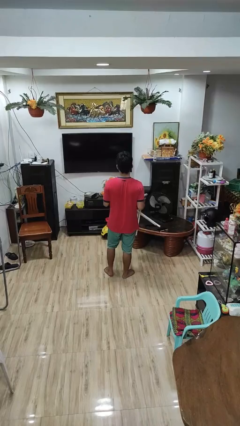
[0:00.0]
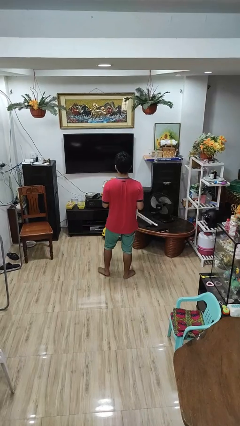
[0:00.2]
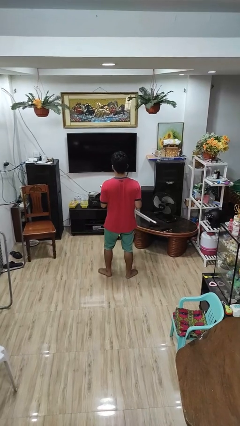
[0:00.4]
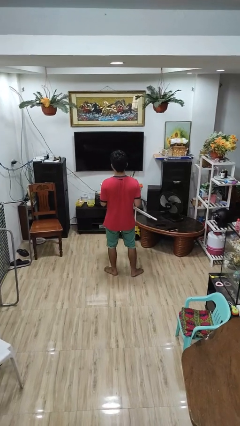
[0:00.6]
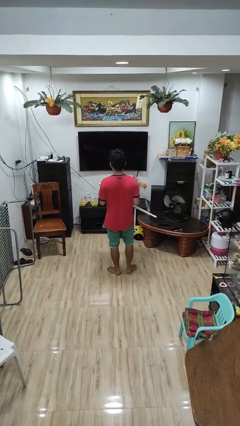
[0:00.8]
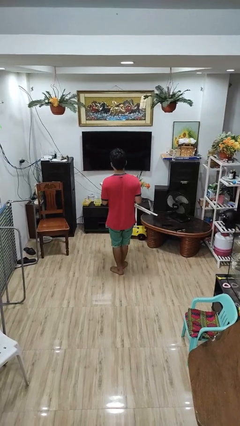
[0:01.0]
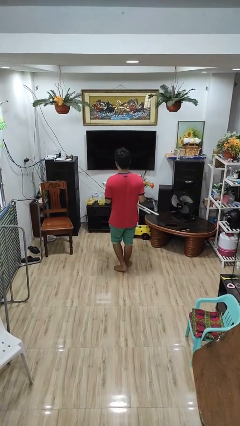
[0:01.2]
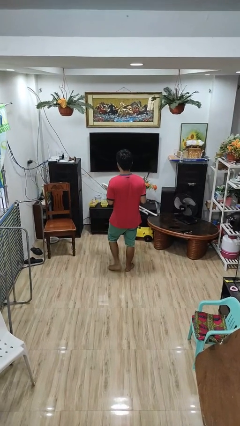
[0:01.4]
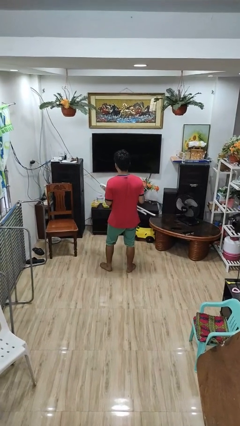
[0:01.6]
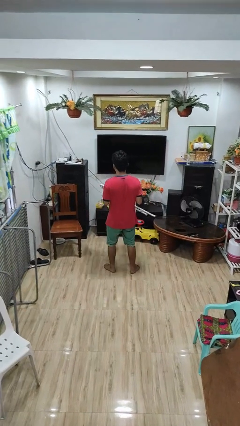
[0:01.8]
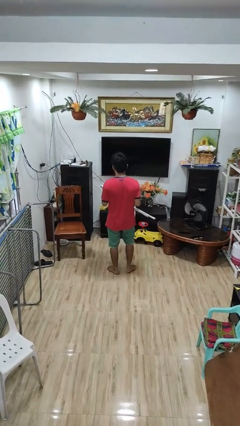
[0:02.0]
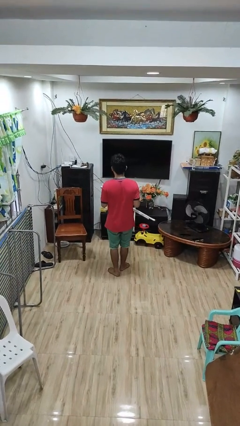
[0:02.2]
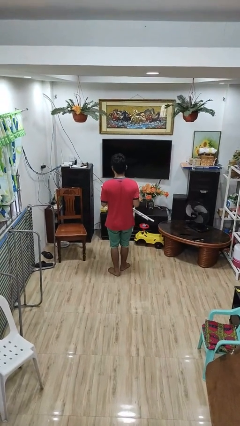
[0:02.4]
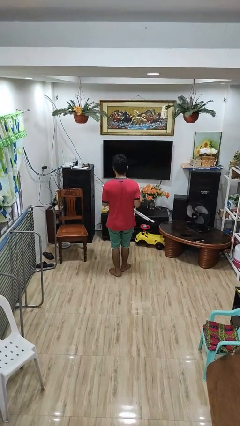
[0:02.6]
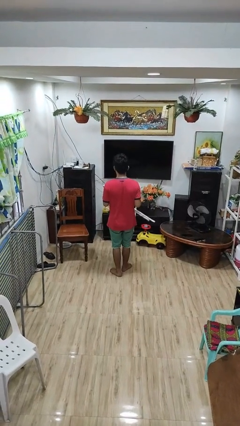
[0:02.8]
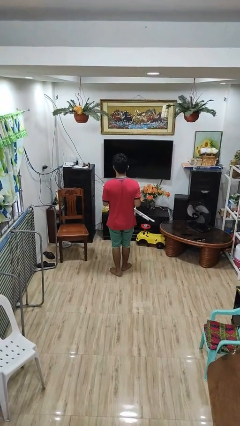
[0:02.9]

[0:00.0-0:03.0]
person carries furniture

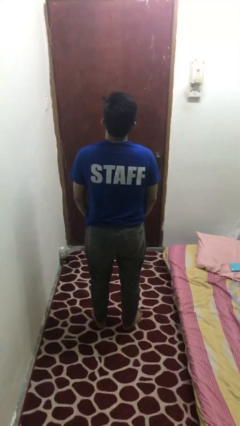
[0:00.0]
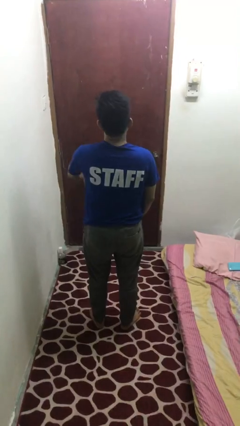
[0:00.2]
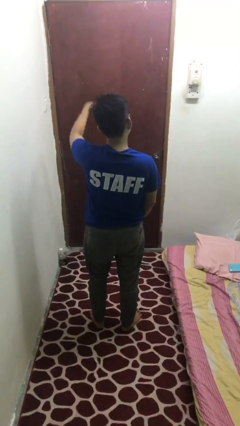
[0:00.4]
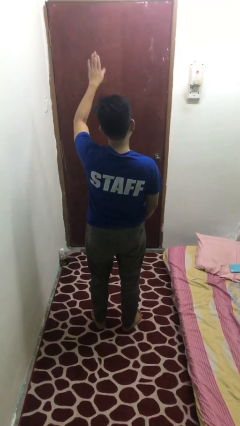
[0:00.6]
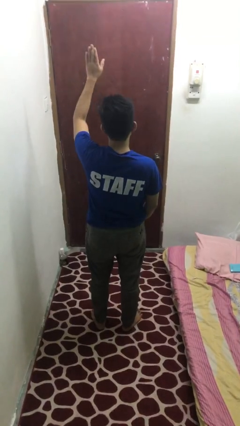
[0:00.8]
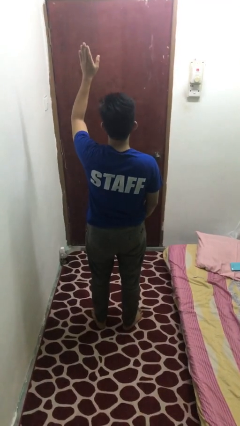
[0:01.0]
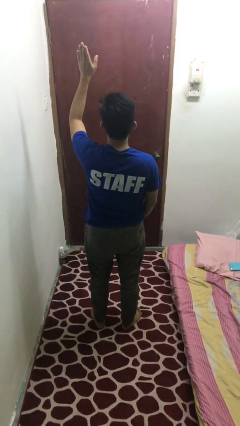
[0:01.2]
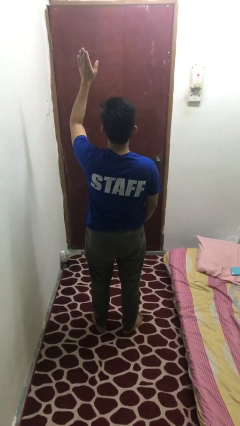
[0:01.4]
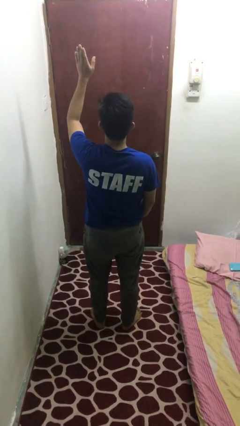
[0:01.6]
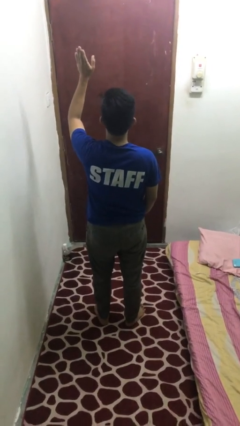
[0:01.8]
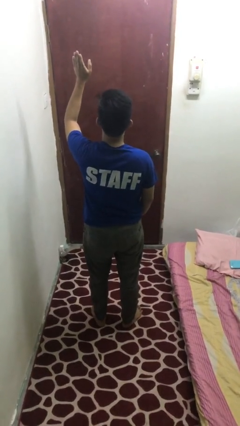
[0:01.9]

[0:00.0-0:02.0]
person gestures swipe up

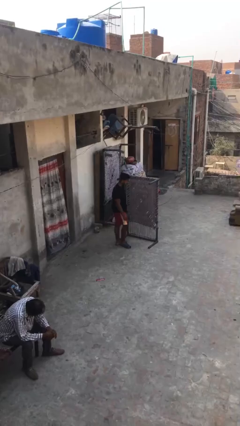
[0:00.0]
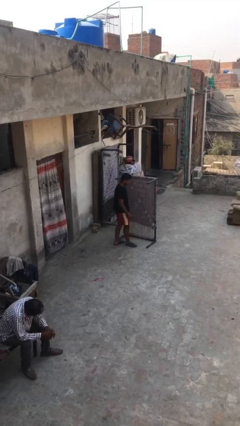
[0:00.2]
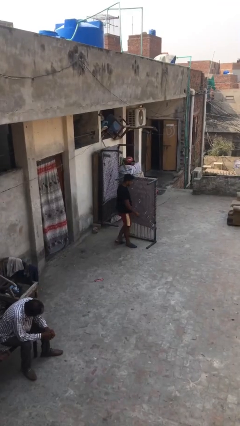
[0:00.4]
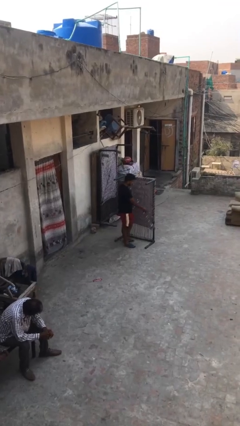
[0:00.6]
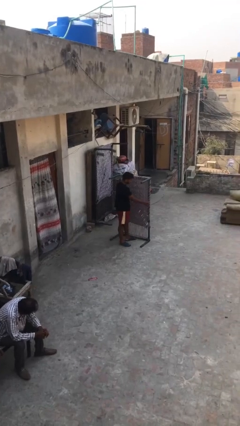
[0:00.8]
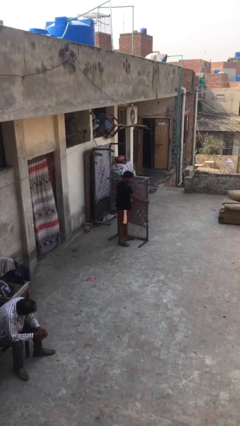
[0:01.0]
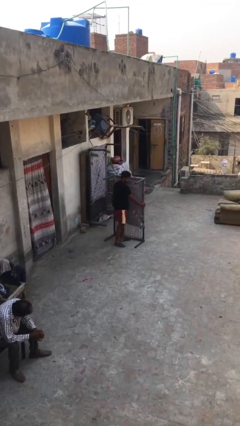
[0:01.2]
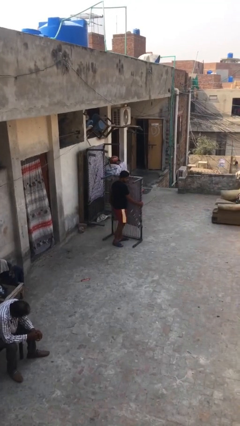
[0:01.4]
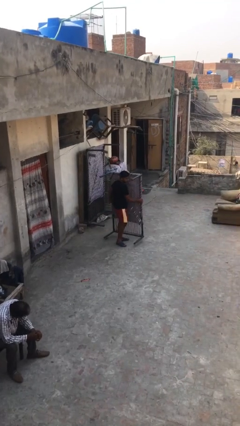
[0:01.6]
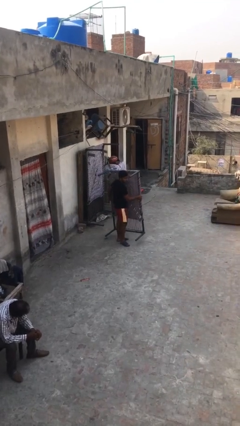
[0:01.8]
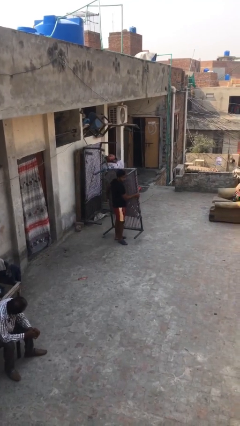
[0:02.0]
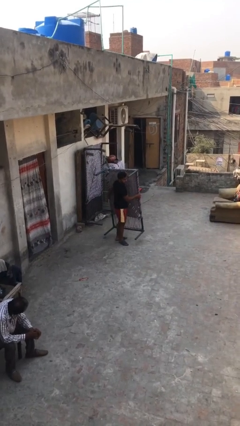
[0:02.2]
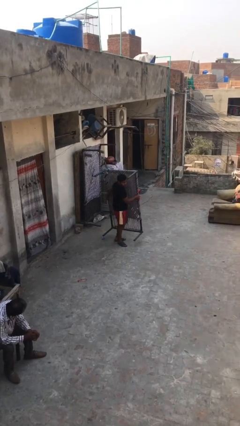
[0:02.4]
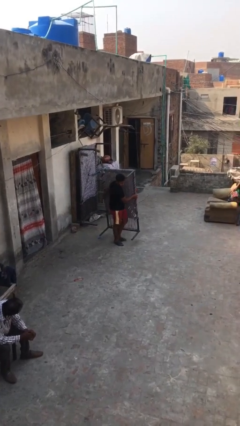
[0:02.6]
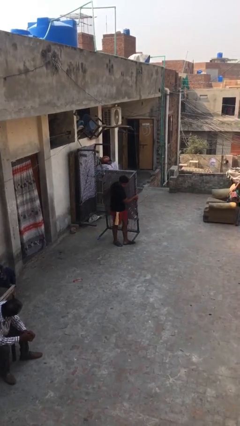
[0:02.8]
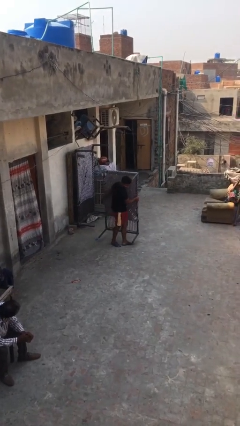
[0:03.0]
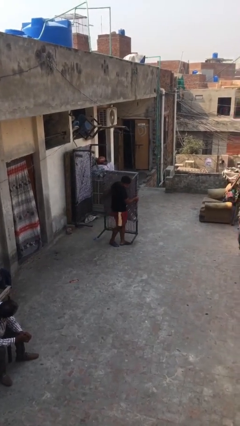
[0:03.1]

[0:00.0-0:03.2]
person picks up object from floor

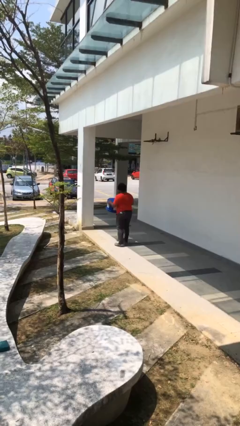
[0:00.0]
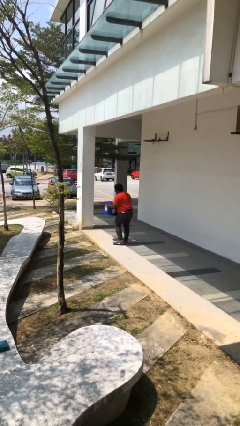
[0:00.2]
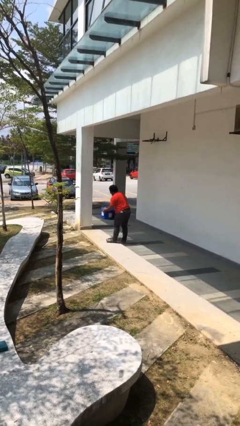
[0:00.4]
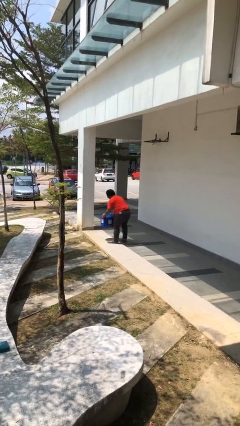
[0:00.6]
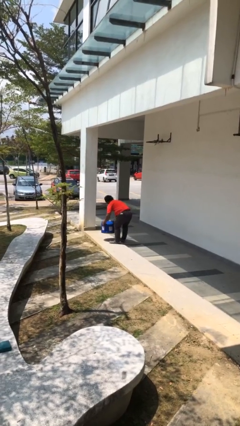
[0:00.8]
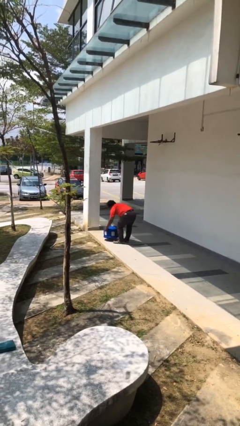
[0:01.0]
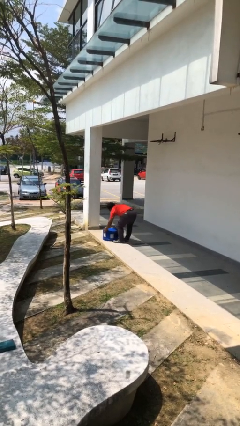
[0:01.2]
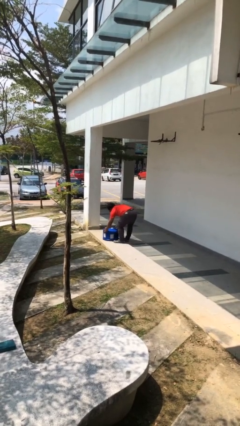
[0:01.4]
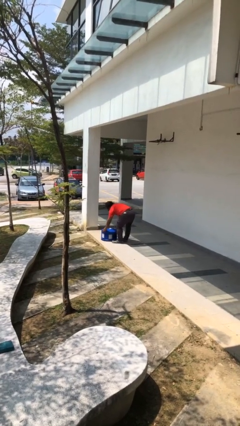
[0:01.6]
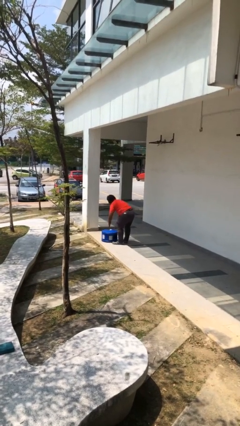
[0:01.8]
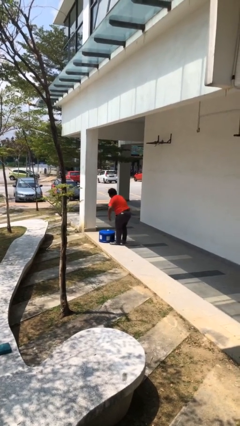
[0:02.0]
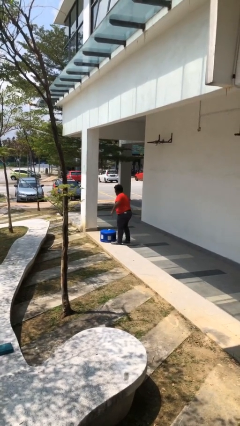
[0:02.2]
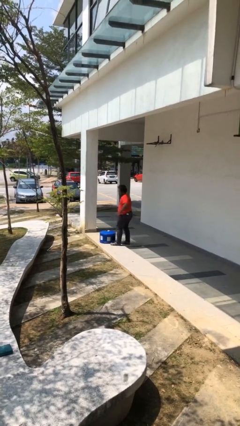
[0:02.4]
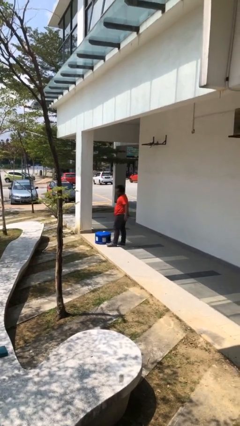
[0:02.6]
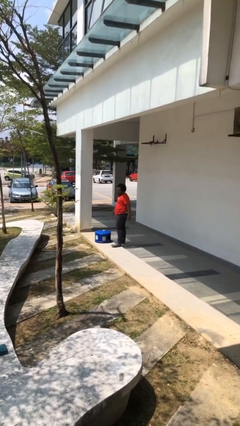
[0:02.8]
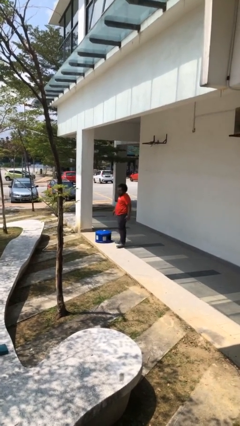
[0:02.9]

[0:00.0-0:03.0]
person puts down object on floor

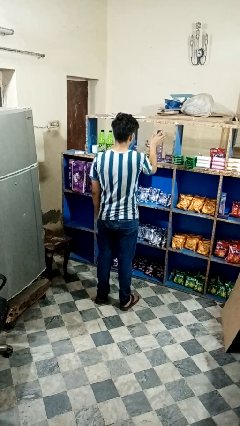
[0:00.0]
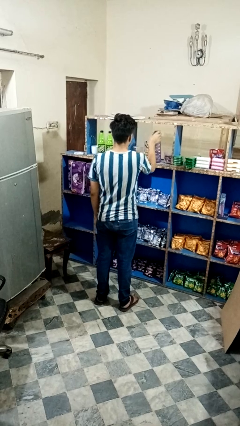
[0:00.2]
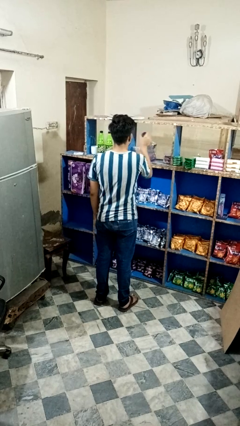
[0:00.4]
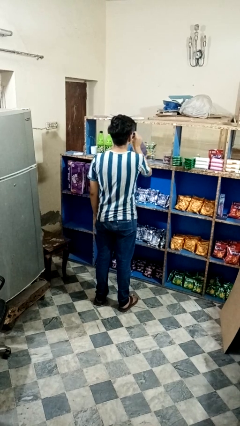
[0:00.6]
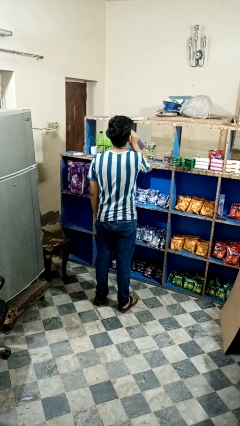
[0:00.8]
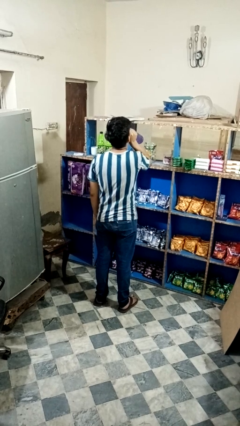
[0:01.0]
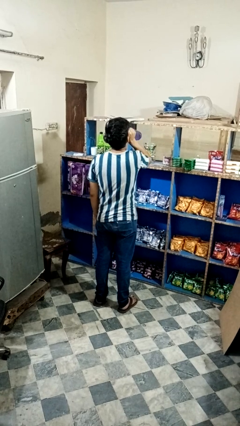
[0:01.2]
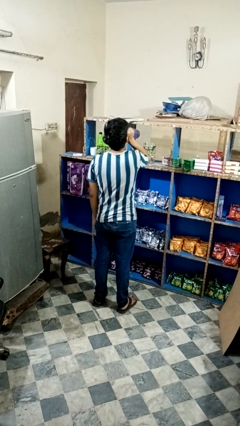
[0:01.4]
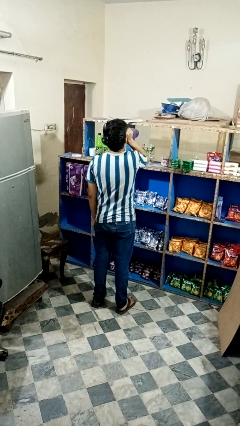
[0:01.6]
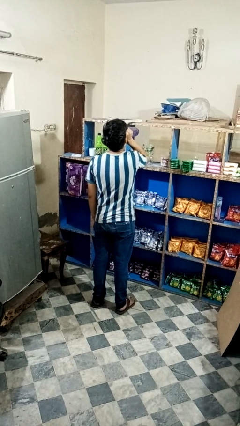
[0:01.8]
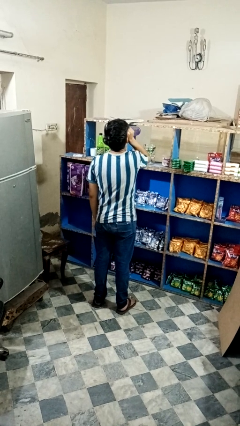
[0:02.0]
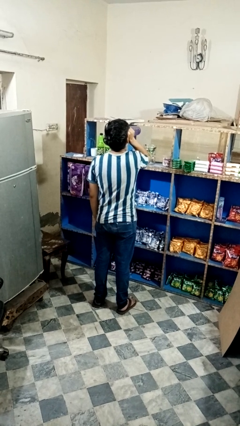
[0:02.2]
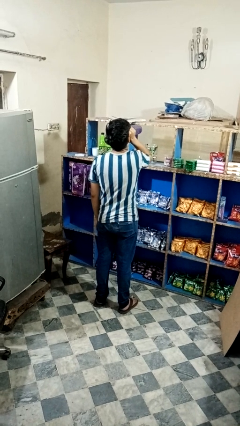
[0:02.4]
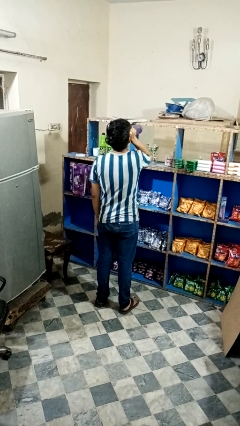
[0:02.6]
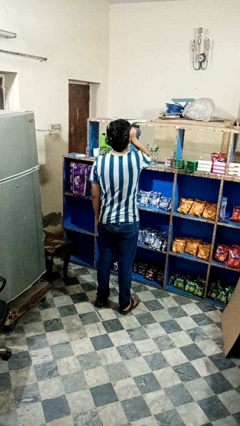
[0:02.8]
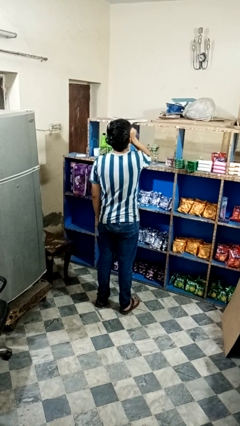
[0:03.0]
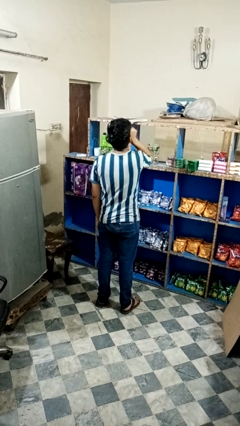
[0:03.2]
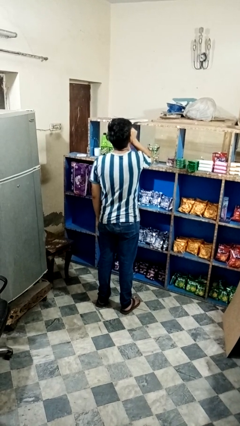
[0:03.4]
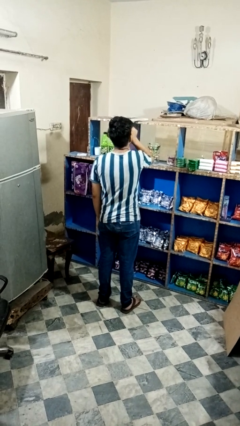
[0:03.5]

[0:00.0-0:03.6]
person drinks from bottle

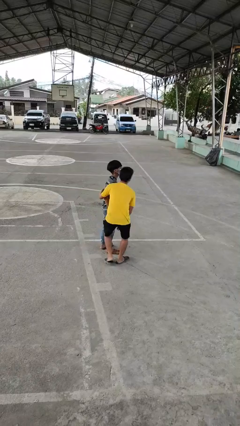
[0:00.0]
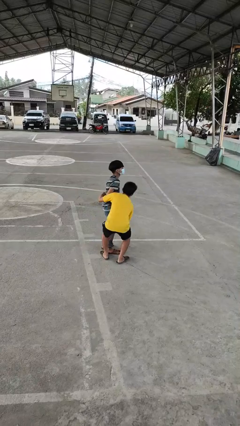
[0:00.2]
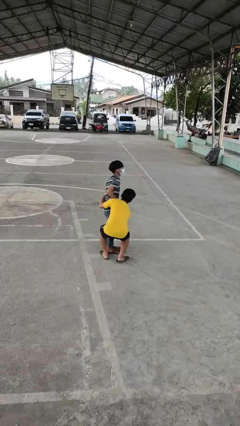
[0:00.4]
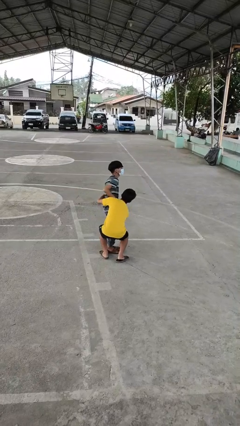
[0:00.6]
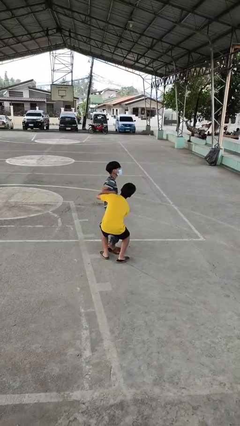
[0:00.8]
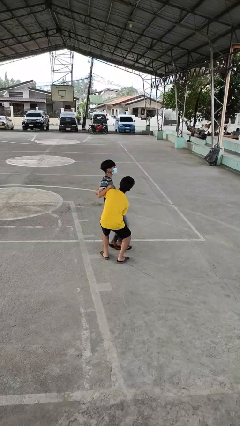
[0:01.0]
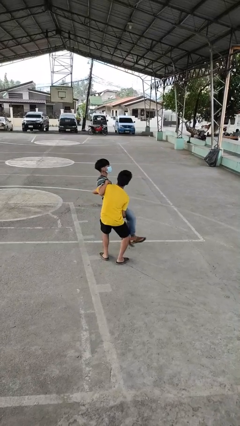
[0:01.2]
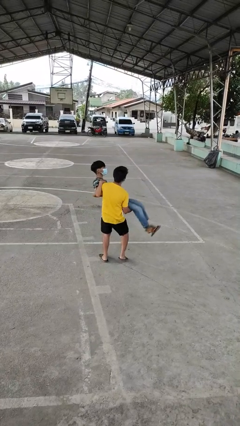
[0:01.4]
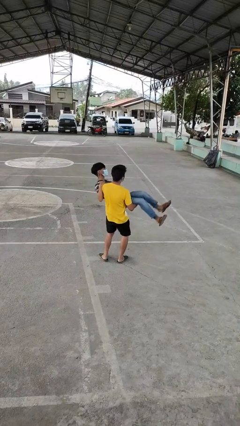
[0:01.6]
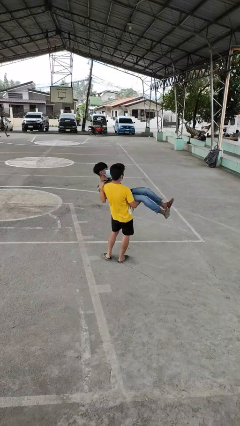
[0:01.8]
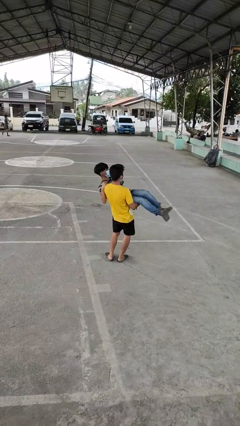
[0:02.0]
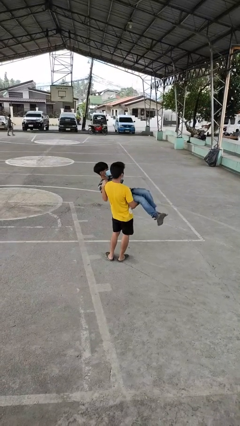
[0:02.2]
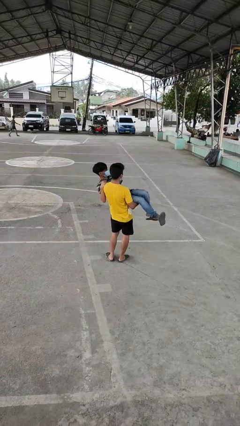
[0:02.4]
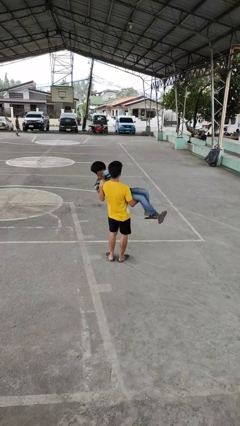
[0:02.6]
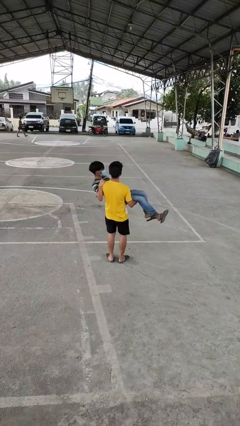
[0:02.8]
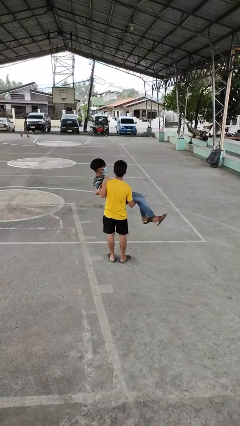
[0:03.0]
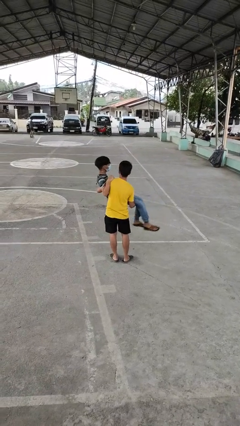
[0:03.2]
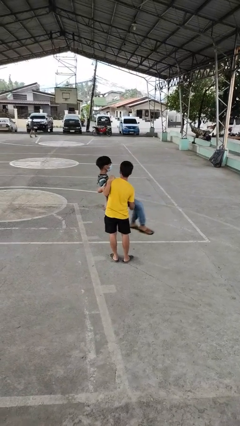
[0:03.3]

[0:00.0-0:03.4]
person picks up person
